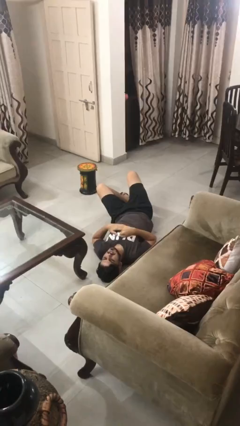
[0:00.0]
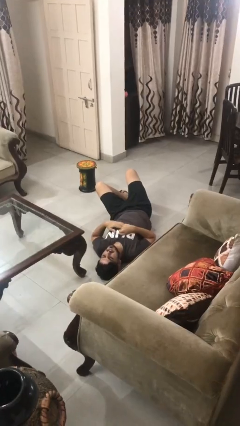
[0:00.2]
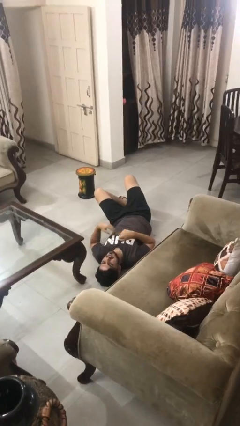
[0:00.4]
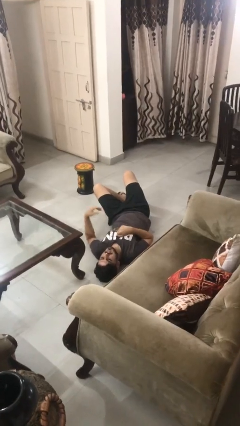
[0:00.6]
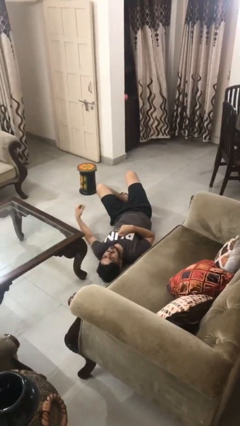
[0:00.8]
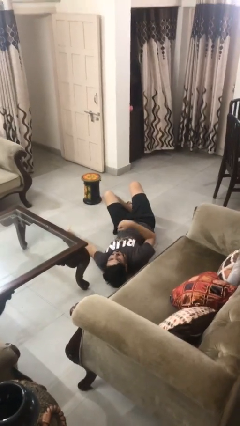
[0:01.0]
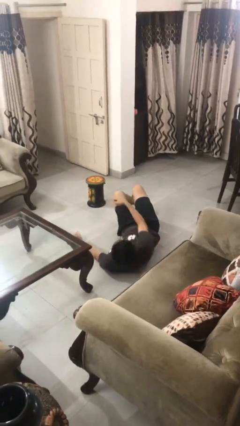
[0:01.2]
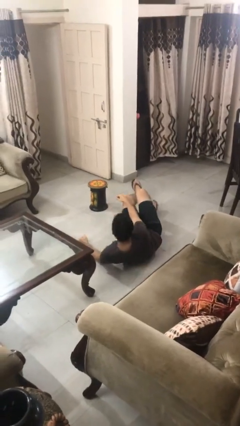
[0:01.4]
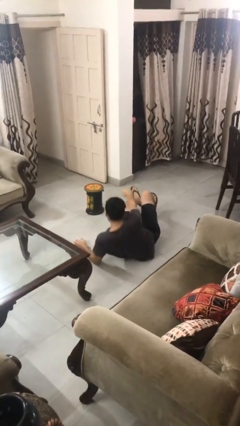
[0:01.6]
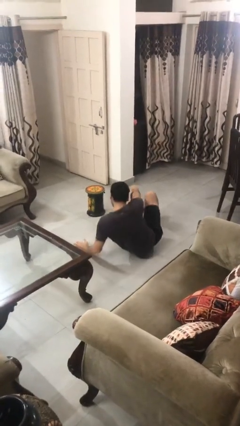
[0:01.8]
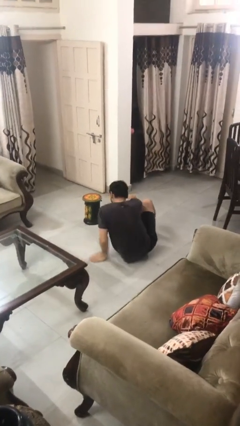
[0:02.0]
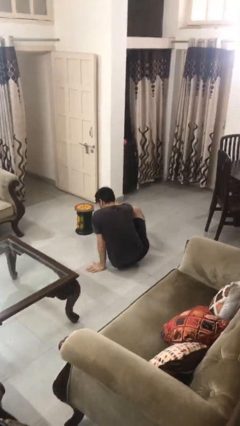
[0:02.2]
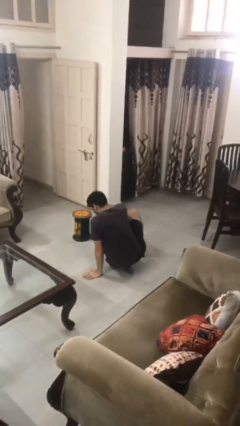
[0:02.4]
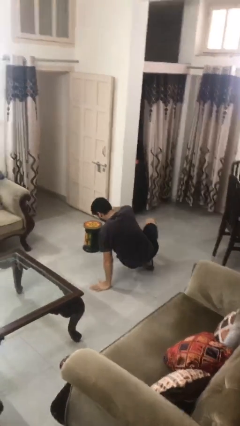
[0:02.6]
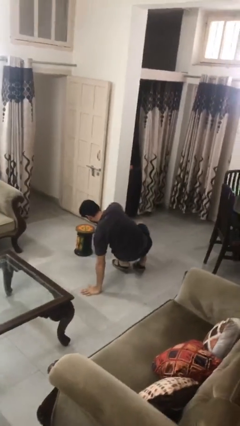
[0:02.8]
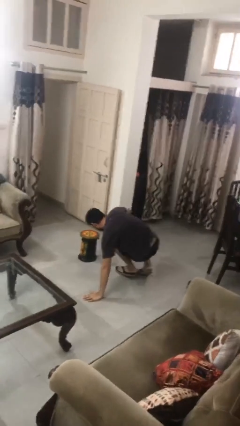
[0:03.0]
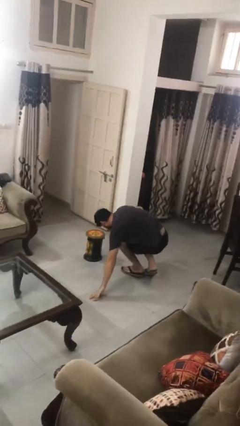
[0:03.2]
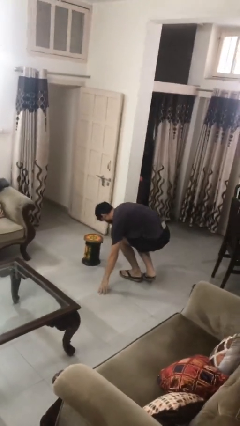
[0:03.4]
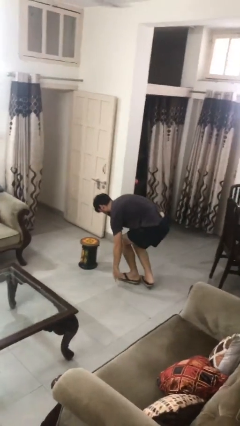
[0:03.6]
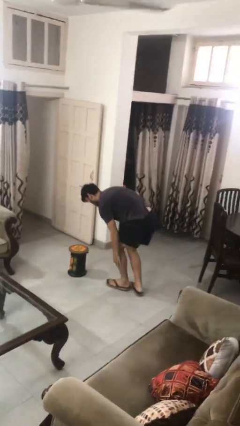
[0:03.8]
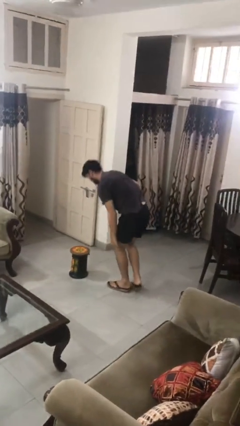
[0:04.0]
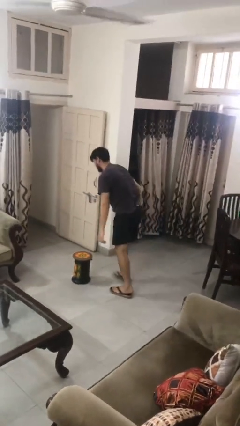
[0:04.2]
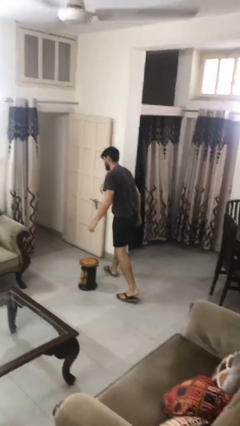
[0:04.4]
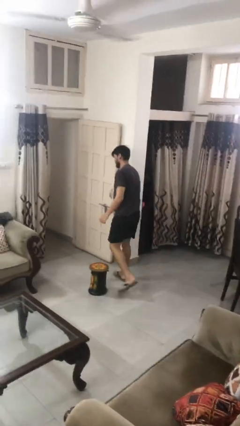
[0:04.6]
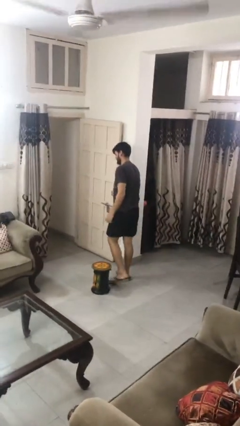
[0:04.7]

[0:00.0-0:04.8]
person stands up from floor

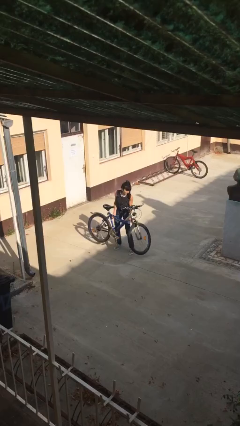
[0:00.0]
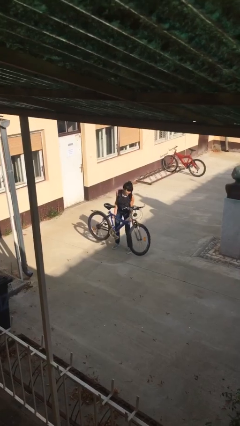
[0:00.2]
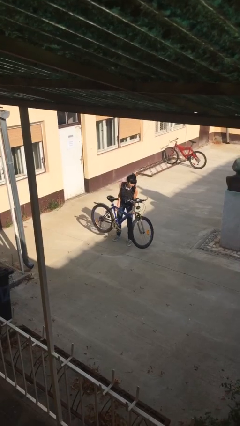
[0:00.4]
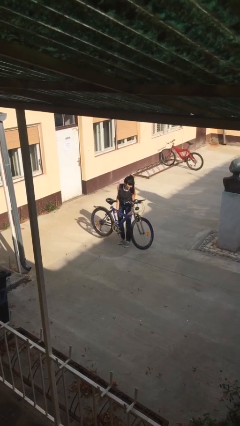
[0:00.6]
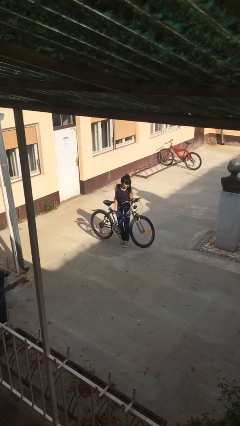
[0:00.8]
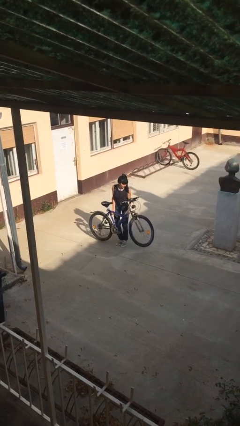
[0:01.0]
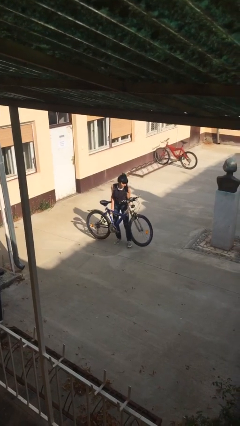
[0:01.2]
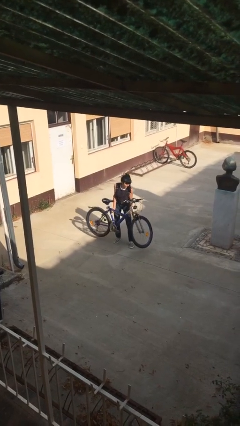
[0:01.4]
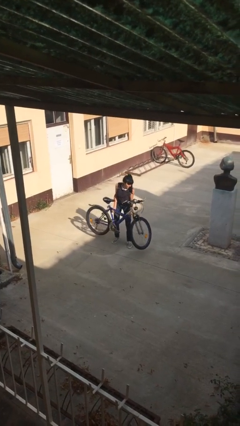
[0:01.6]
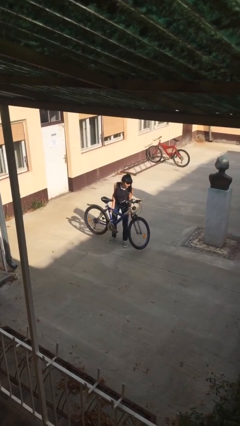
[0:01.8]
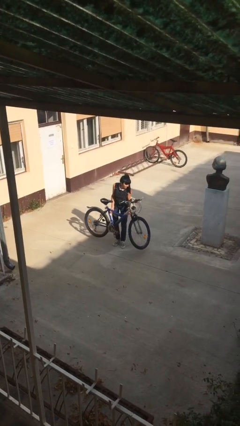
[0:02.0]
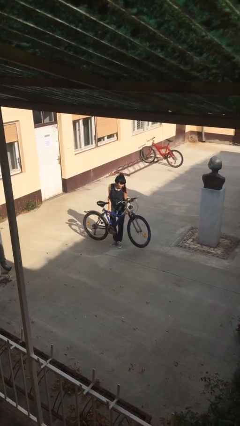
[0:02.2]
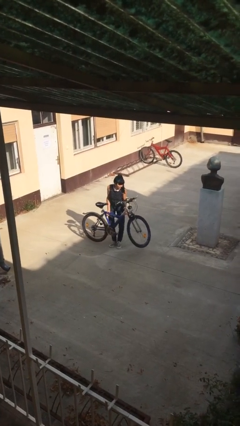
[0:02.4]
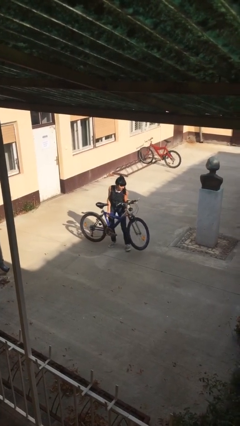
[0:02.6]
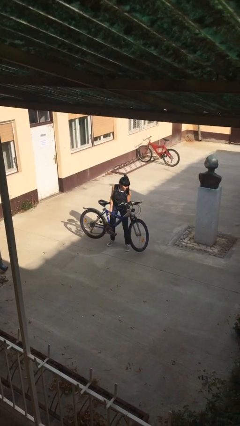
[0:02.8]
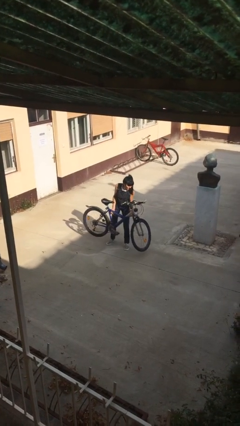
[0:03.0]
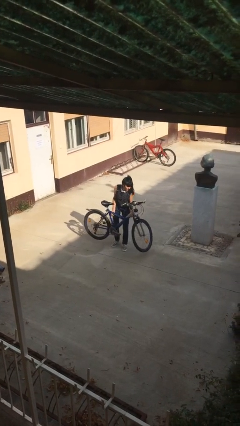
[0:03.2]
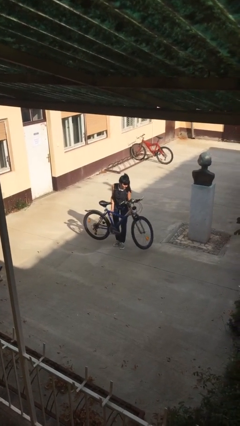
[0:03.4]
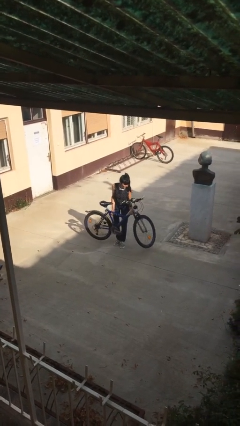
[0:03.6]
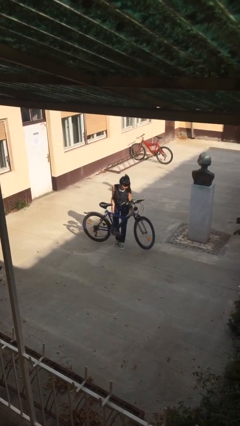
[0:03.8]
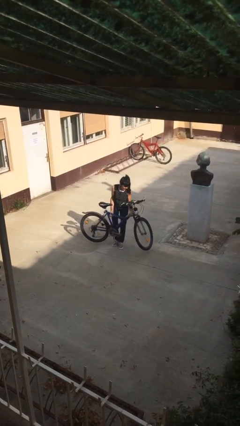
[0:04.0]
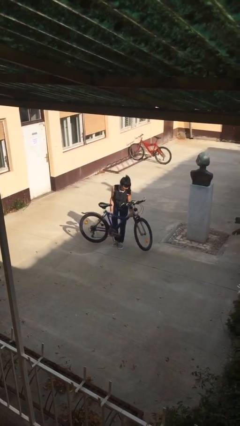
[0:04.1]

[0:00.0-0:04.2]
person carries heavy object

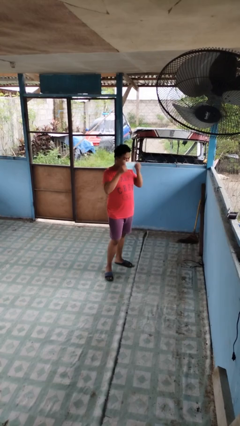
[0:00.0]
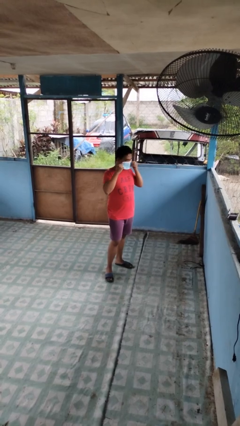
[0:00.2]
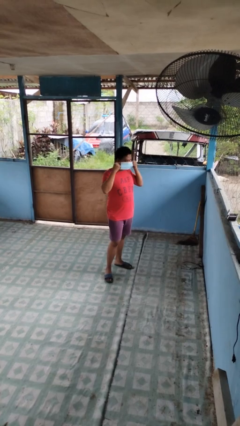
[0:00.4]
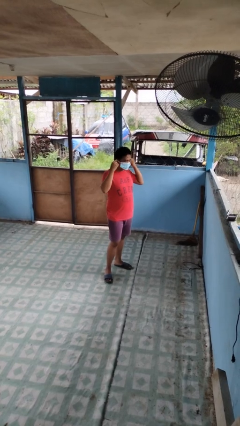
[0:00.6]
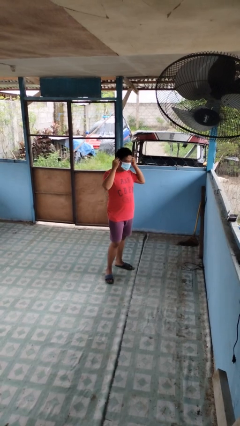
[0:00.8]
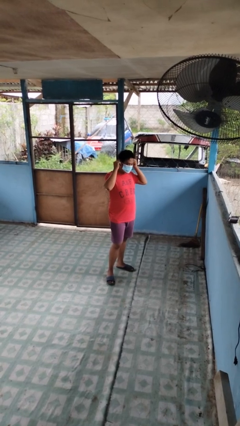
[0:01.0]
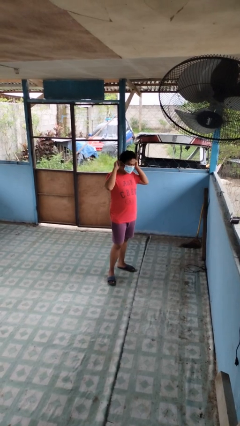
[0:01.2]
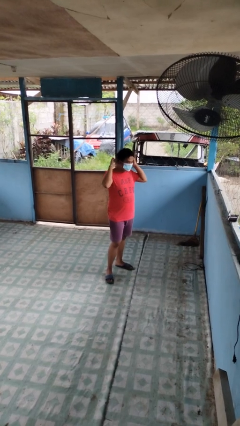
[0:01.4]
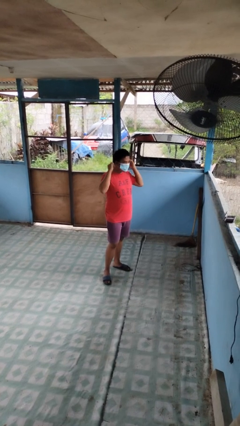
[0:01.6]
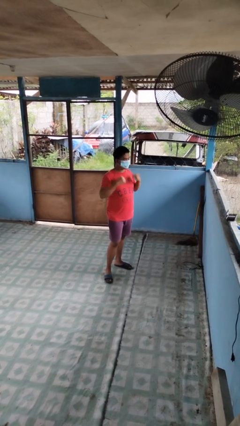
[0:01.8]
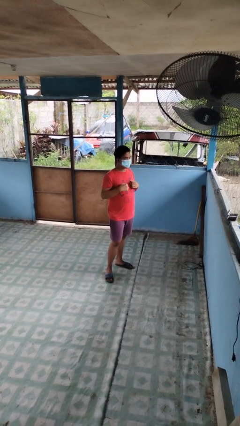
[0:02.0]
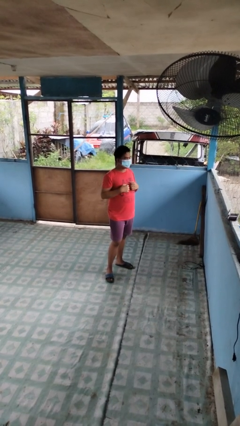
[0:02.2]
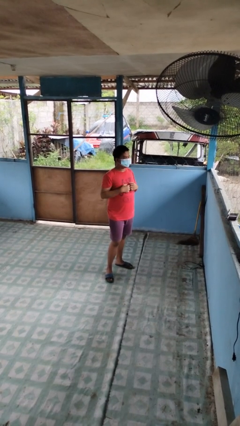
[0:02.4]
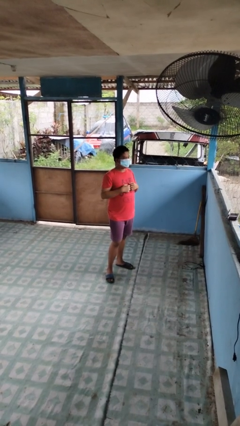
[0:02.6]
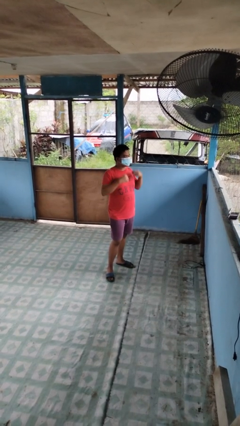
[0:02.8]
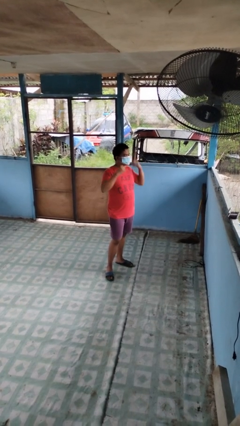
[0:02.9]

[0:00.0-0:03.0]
person puts on facemask

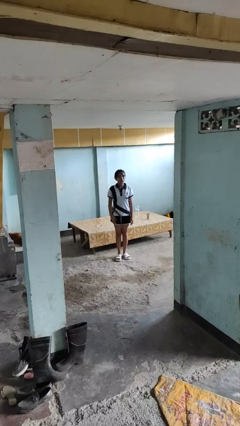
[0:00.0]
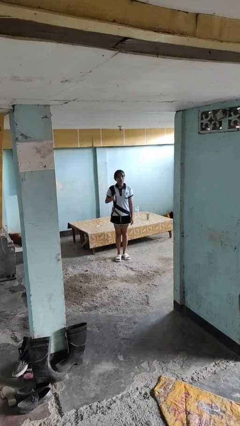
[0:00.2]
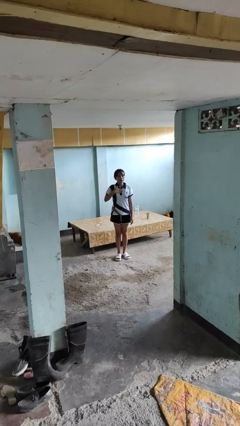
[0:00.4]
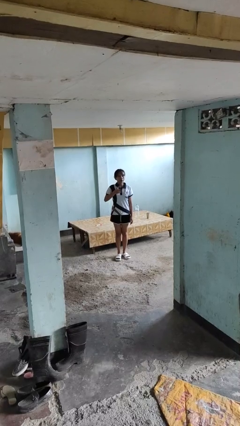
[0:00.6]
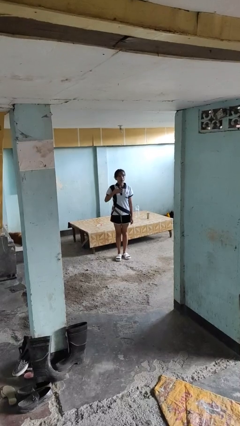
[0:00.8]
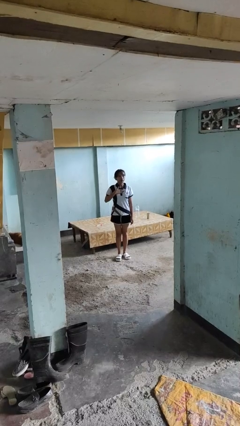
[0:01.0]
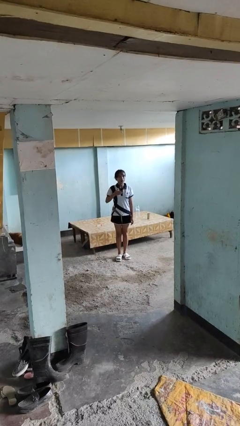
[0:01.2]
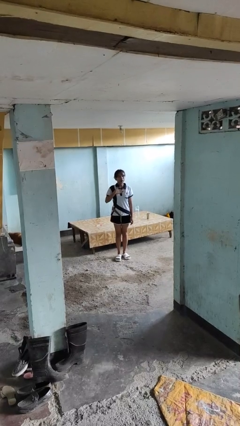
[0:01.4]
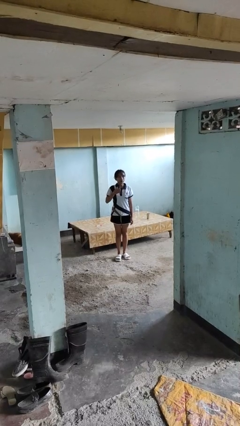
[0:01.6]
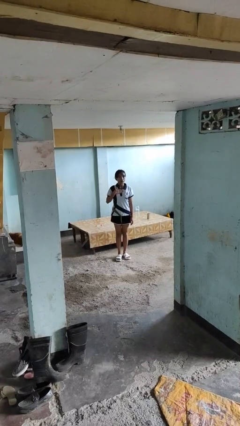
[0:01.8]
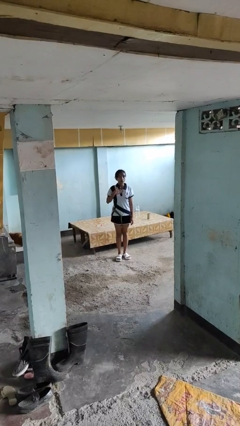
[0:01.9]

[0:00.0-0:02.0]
person drums on chest

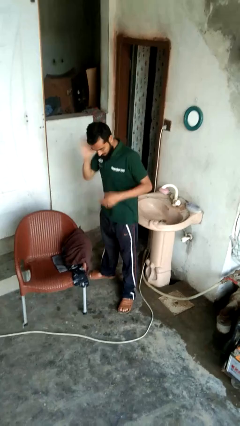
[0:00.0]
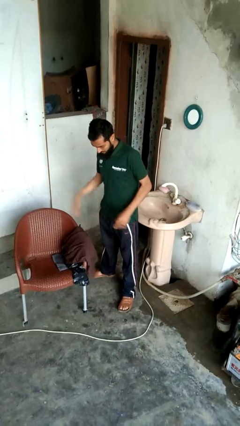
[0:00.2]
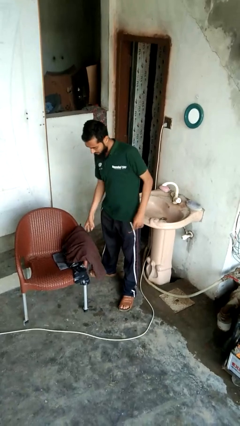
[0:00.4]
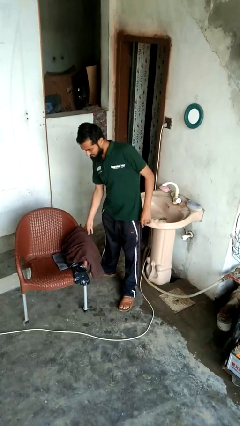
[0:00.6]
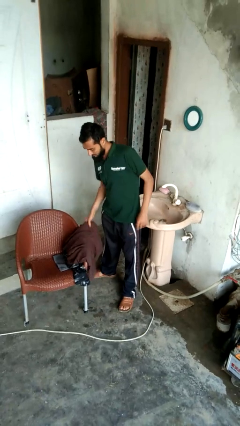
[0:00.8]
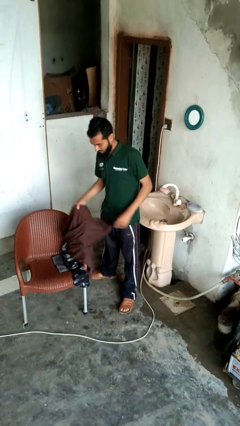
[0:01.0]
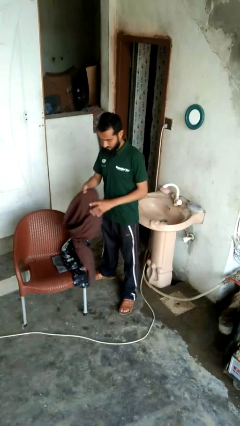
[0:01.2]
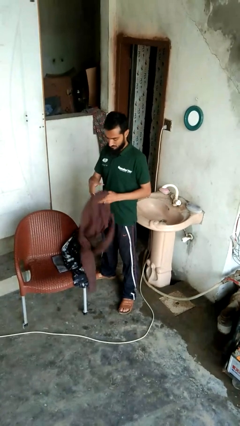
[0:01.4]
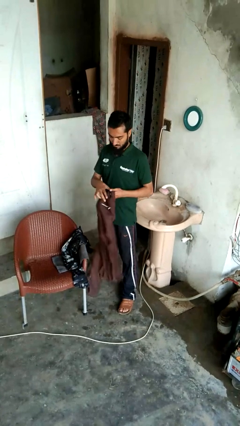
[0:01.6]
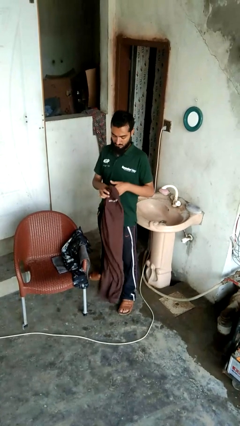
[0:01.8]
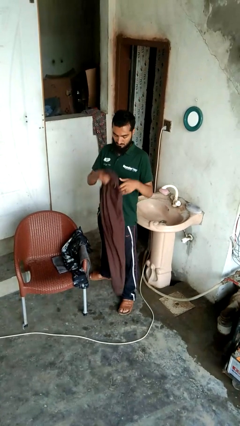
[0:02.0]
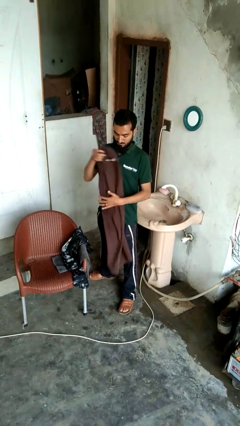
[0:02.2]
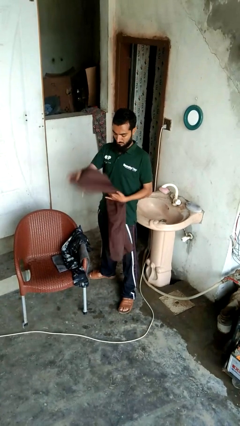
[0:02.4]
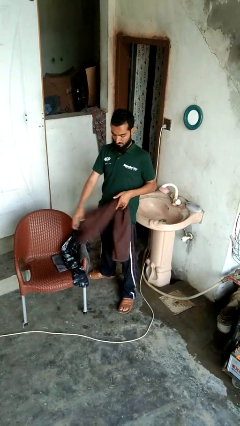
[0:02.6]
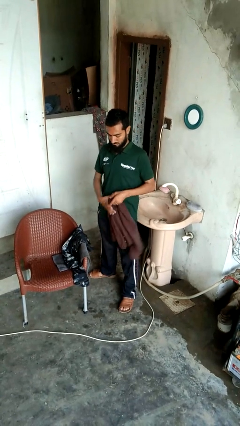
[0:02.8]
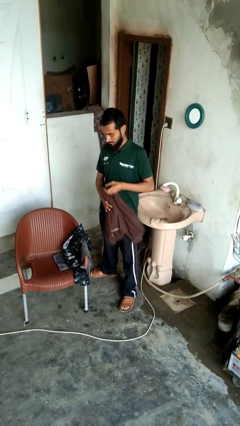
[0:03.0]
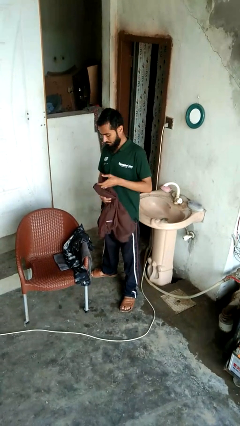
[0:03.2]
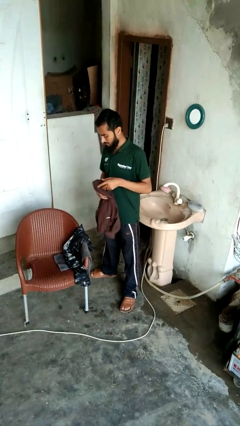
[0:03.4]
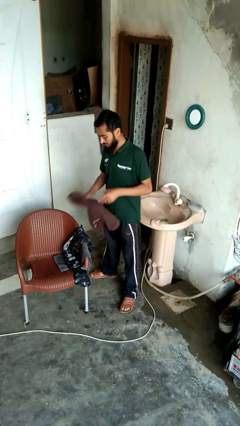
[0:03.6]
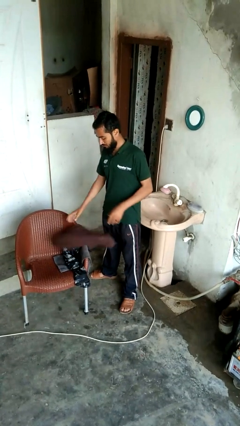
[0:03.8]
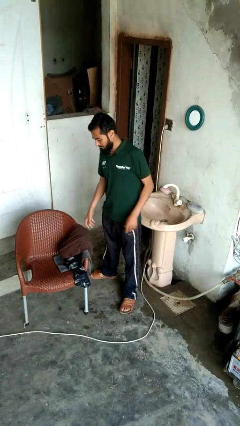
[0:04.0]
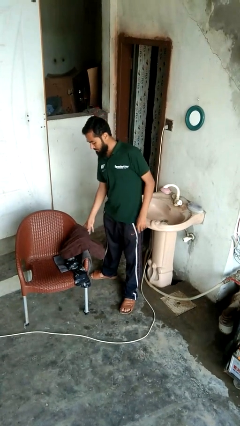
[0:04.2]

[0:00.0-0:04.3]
person folds pants
